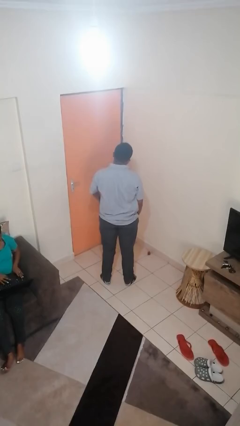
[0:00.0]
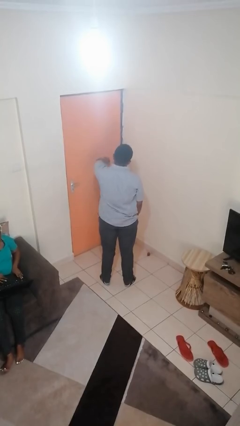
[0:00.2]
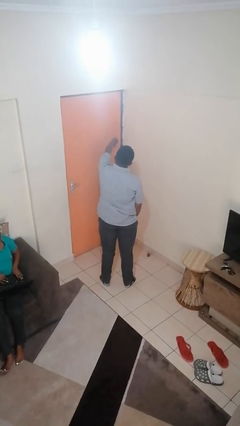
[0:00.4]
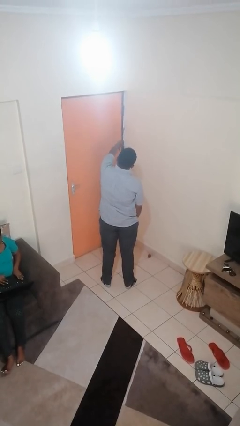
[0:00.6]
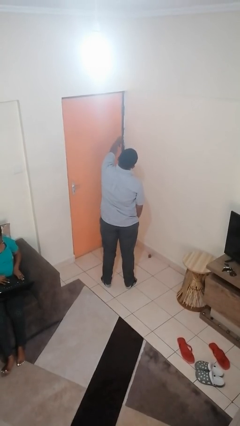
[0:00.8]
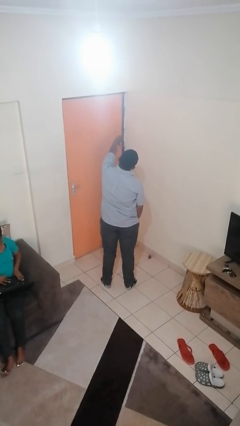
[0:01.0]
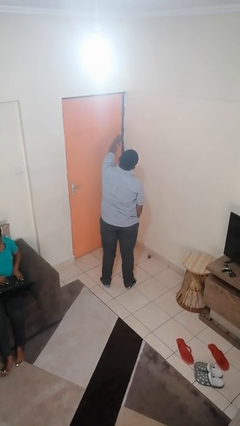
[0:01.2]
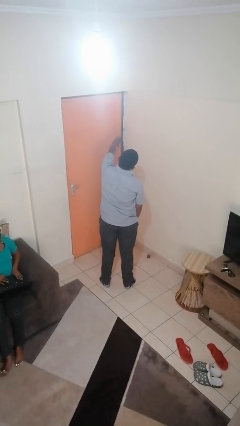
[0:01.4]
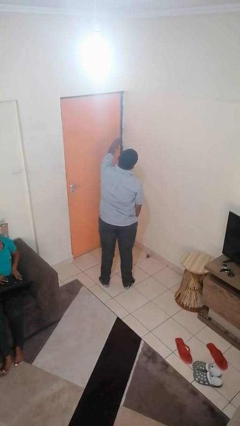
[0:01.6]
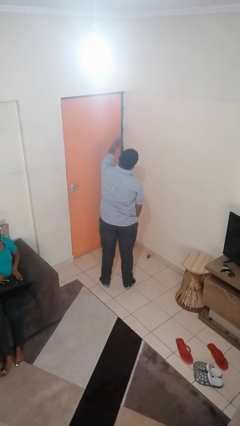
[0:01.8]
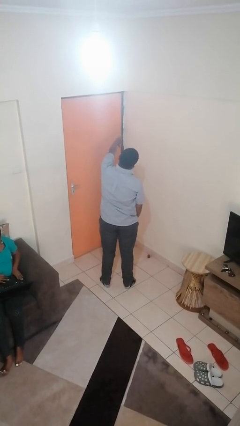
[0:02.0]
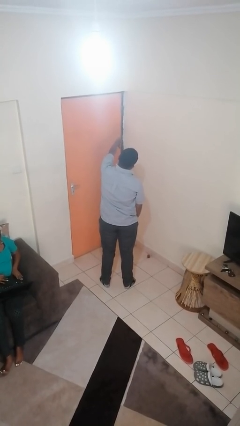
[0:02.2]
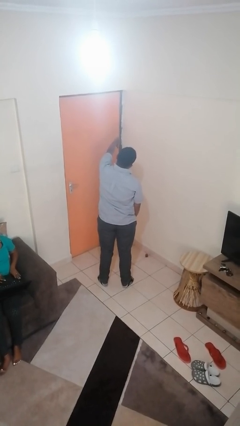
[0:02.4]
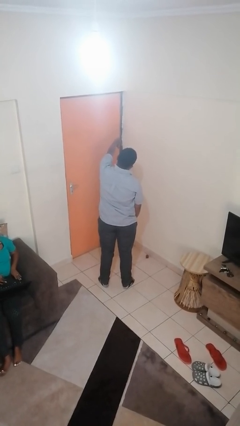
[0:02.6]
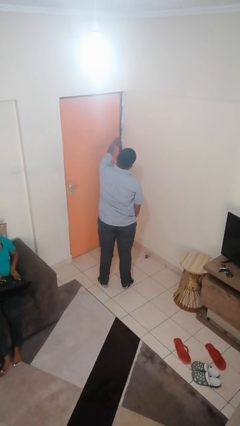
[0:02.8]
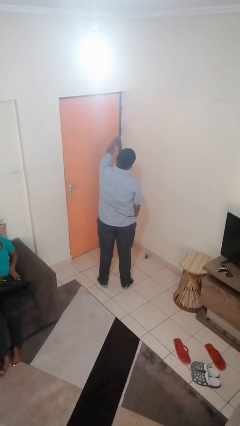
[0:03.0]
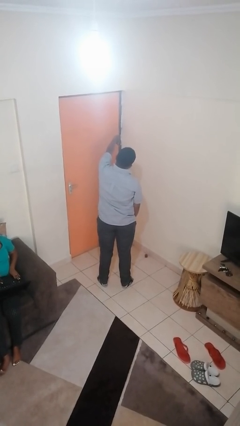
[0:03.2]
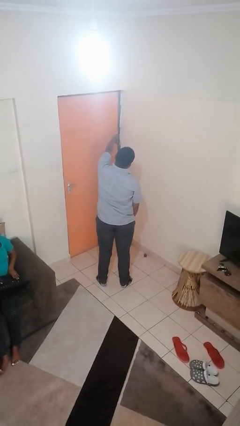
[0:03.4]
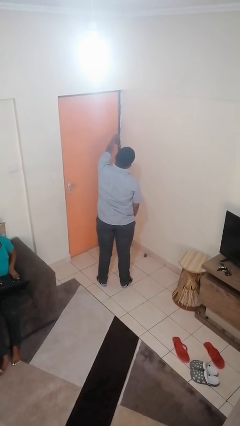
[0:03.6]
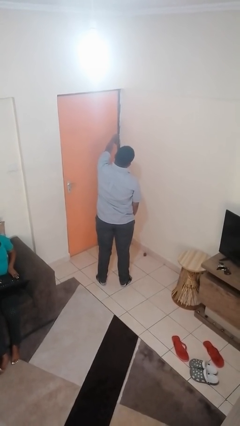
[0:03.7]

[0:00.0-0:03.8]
person gestures thumbs down

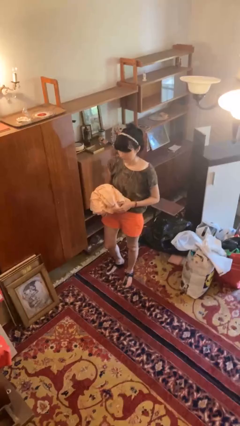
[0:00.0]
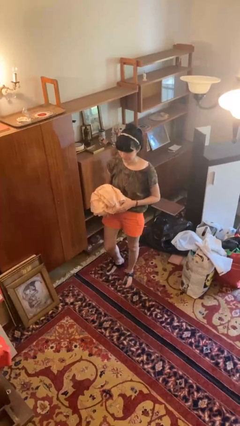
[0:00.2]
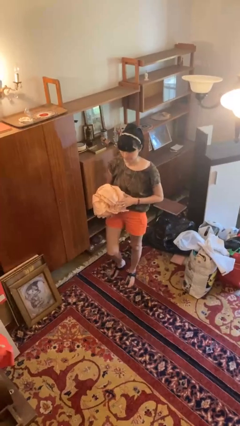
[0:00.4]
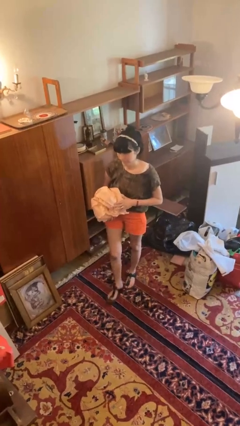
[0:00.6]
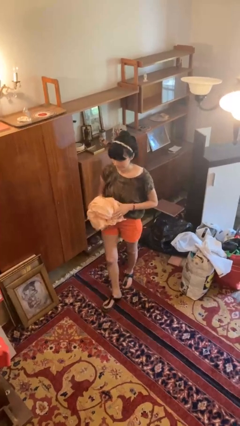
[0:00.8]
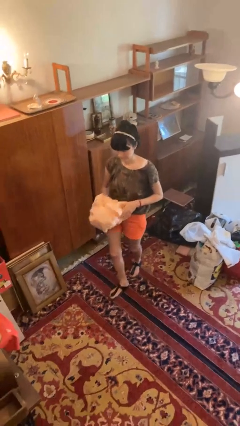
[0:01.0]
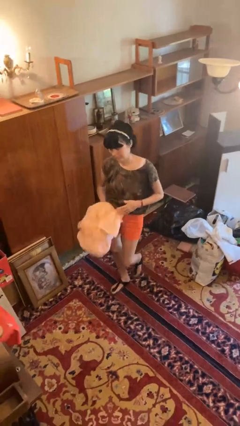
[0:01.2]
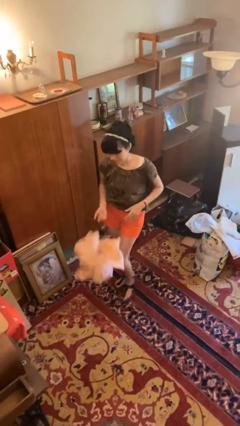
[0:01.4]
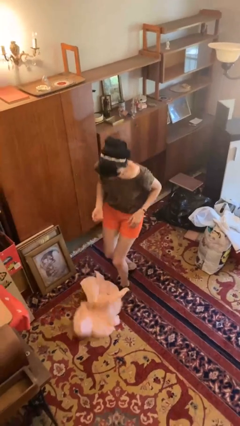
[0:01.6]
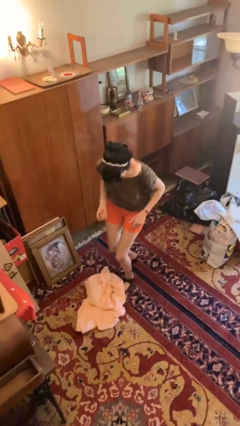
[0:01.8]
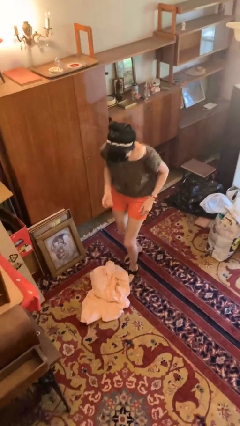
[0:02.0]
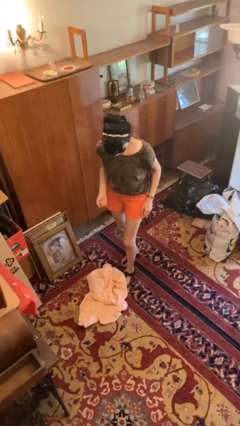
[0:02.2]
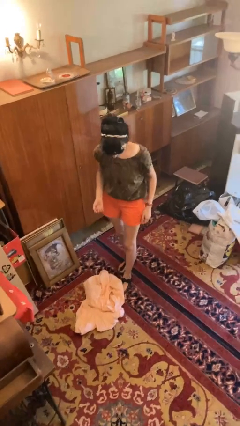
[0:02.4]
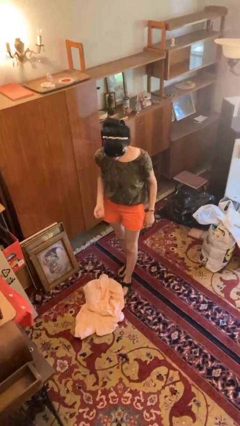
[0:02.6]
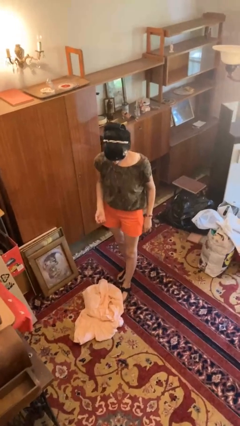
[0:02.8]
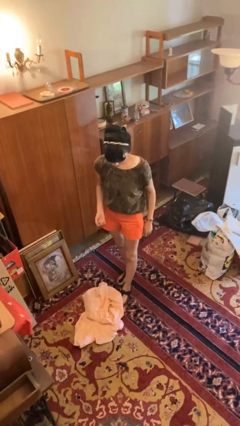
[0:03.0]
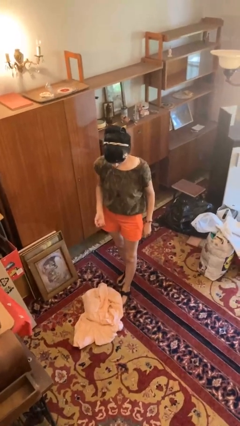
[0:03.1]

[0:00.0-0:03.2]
person drops object

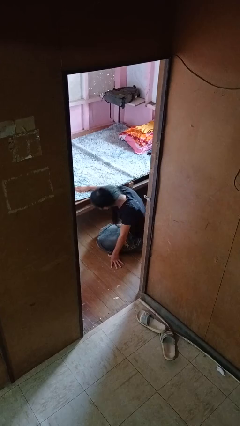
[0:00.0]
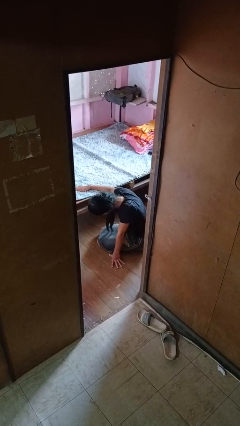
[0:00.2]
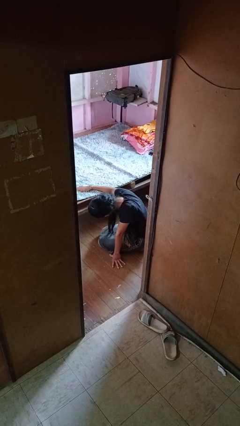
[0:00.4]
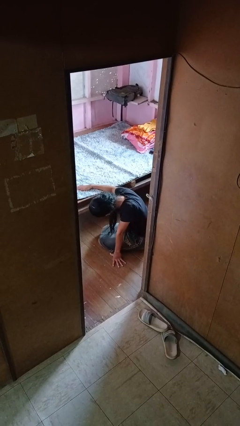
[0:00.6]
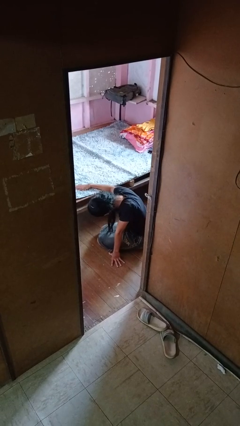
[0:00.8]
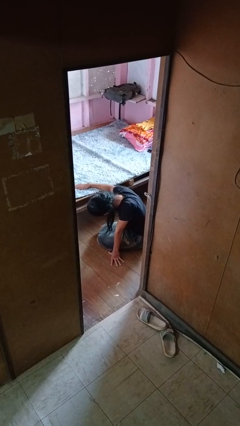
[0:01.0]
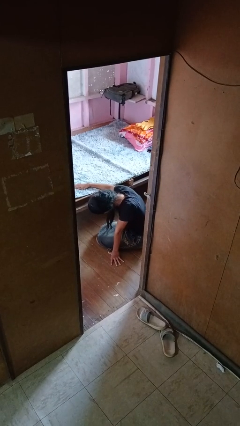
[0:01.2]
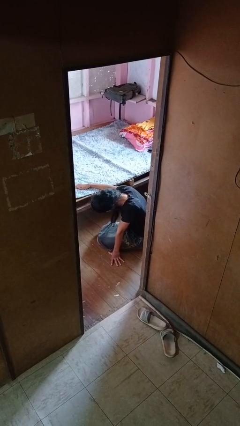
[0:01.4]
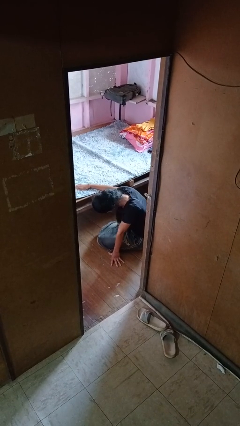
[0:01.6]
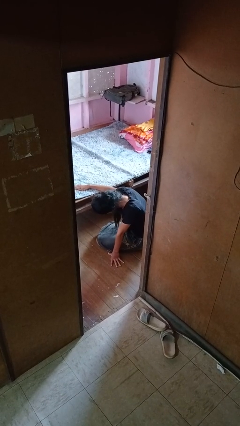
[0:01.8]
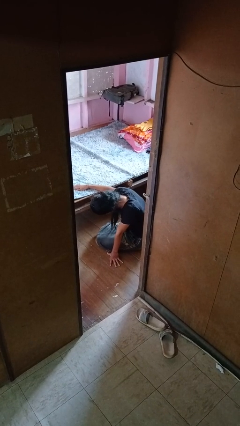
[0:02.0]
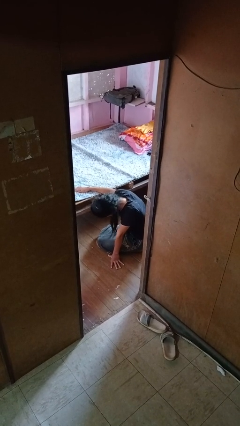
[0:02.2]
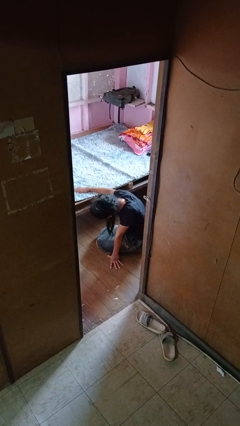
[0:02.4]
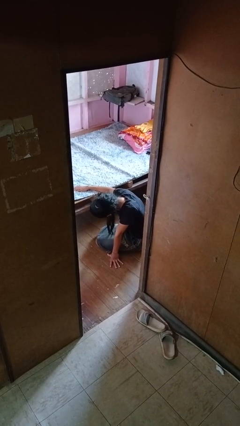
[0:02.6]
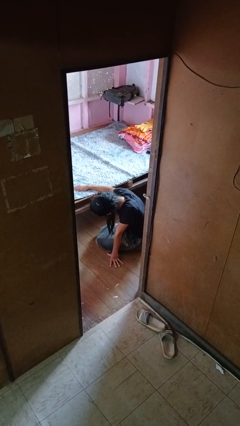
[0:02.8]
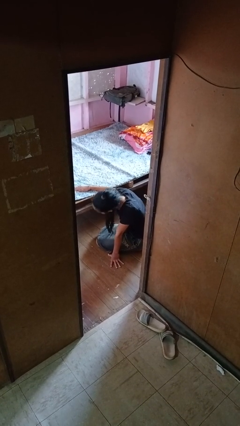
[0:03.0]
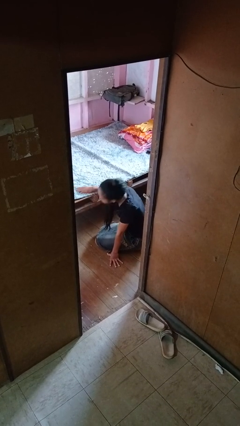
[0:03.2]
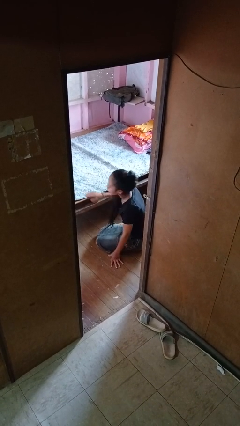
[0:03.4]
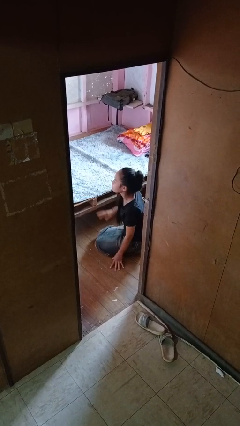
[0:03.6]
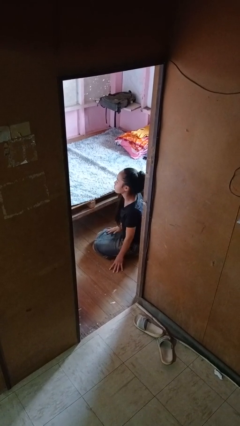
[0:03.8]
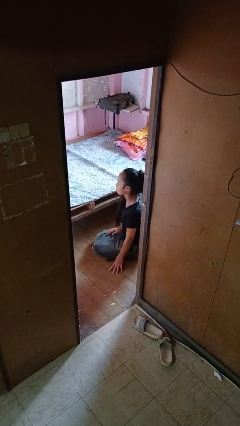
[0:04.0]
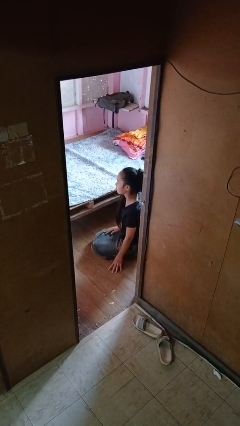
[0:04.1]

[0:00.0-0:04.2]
person searches under bed

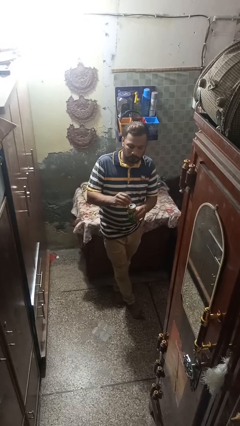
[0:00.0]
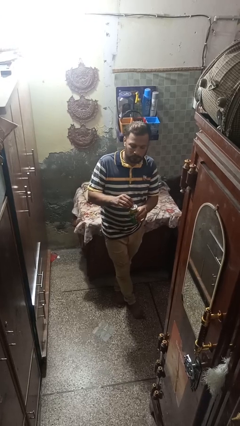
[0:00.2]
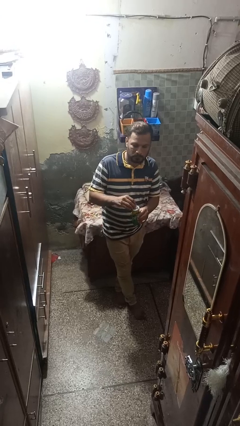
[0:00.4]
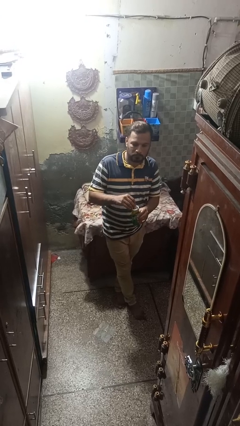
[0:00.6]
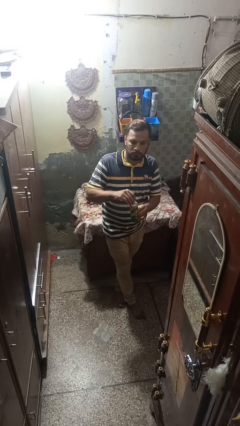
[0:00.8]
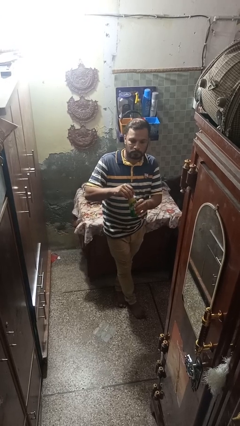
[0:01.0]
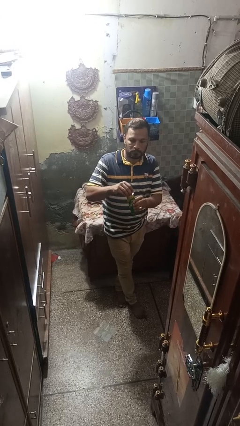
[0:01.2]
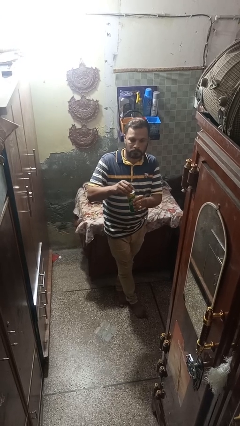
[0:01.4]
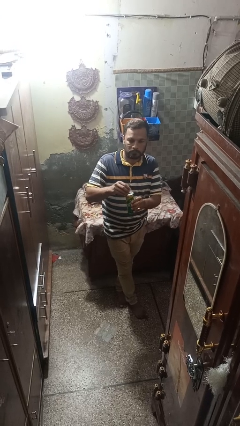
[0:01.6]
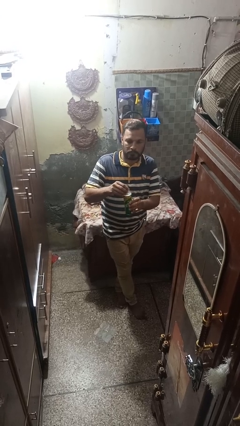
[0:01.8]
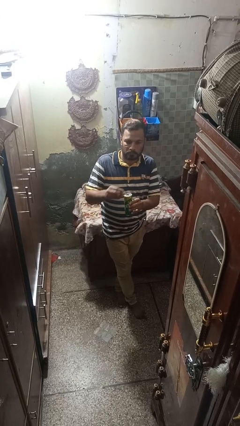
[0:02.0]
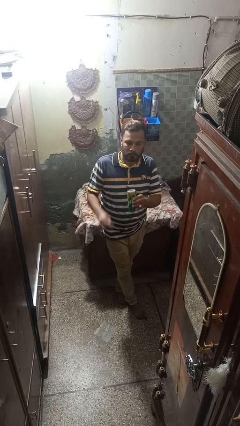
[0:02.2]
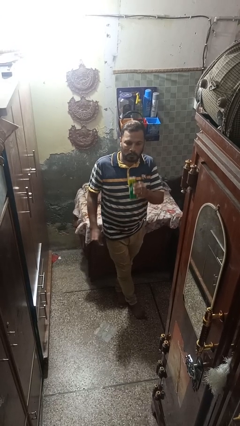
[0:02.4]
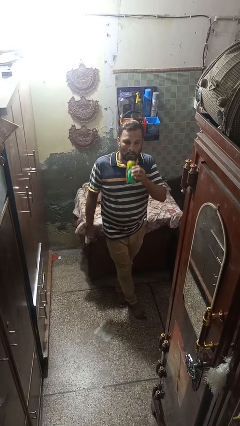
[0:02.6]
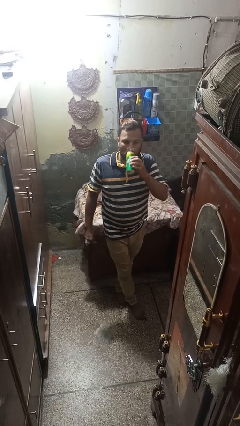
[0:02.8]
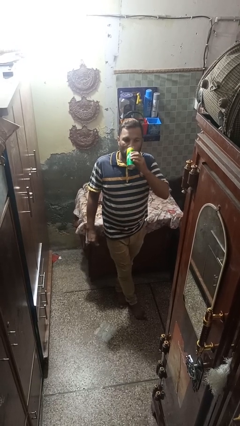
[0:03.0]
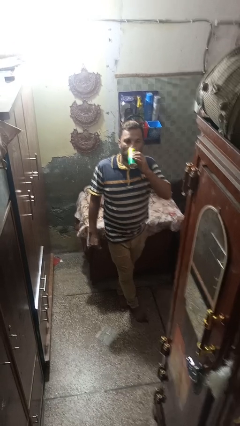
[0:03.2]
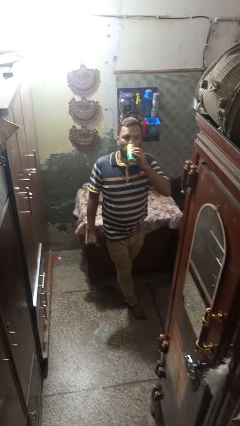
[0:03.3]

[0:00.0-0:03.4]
person opens beverage can

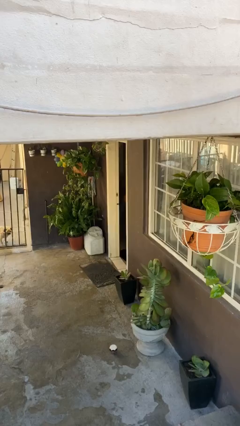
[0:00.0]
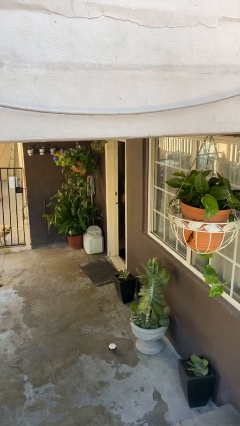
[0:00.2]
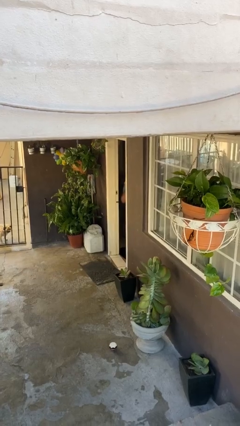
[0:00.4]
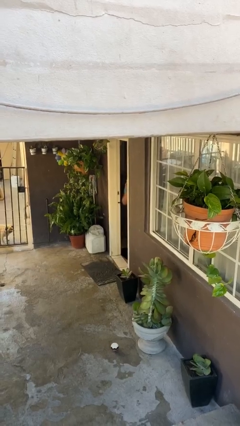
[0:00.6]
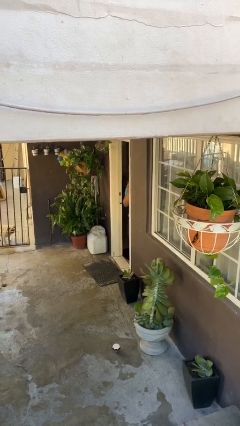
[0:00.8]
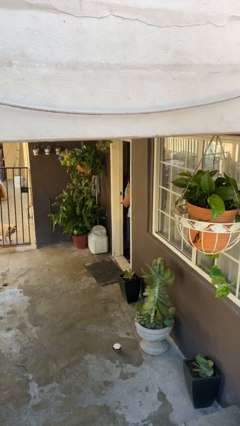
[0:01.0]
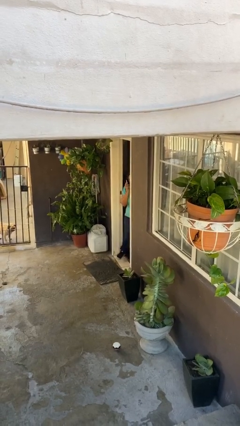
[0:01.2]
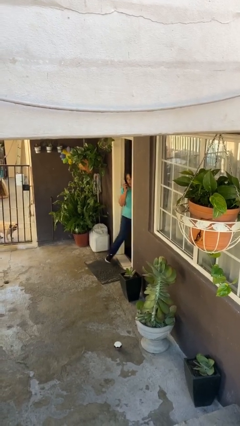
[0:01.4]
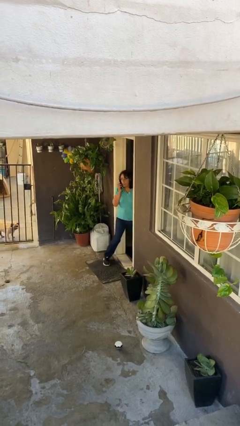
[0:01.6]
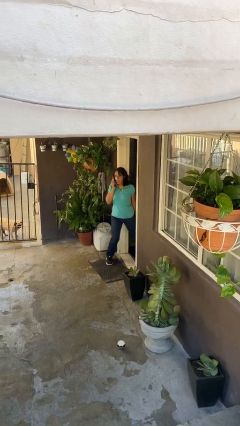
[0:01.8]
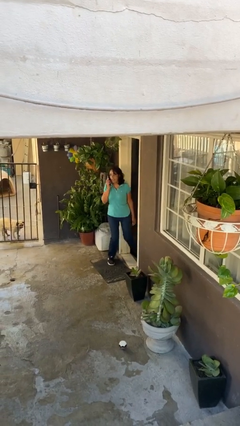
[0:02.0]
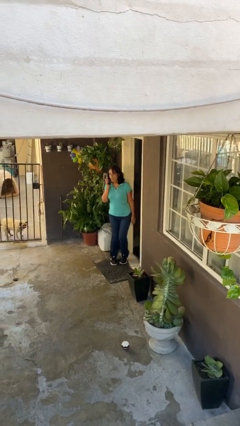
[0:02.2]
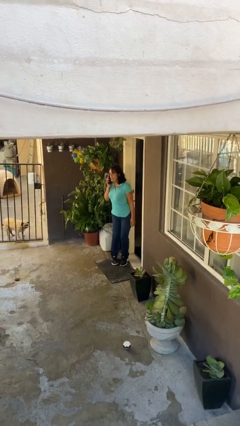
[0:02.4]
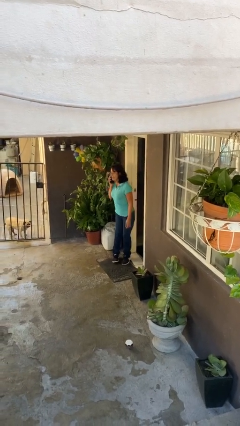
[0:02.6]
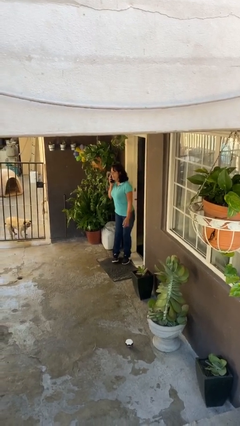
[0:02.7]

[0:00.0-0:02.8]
person enters scene through structure

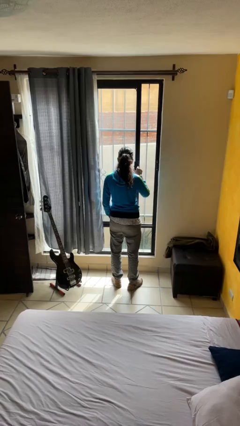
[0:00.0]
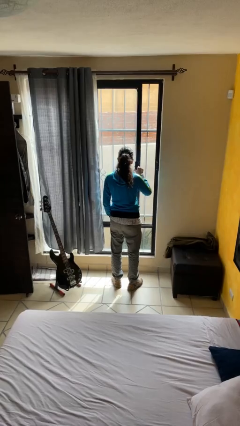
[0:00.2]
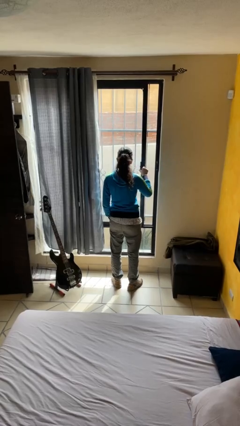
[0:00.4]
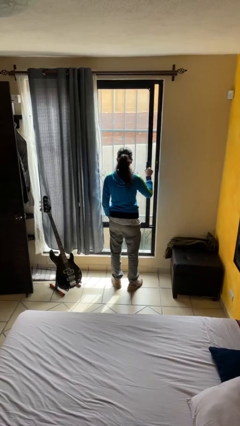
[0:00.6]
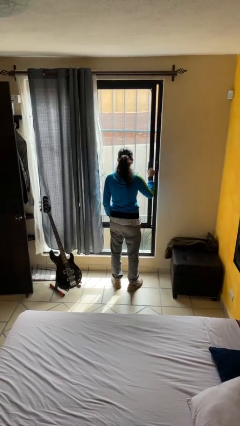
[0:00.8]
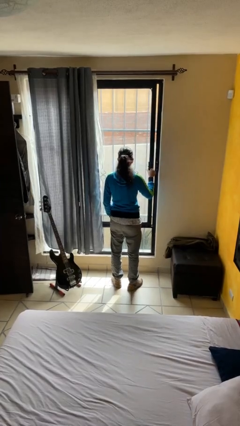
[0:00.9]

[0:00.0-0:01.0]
person closes home window
